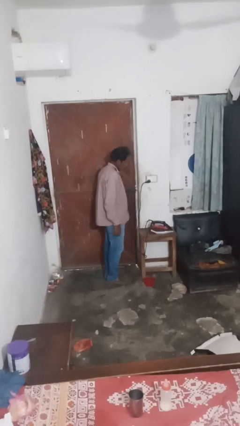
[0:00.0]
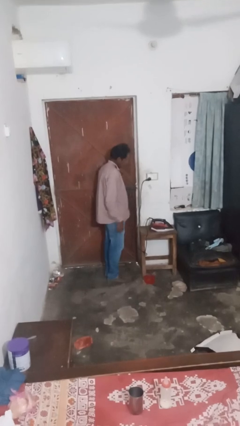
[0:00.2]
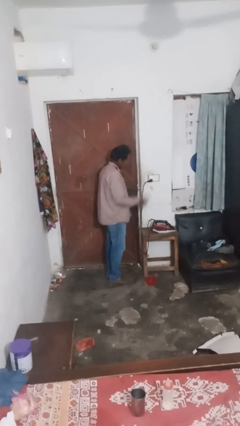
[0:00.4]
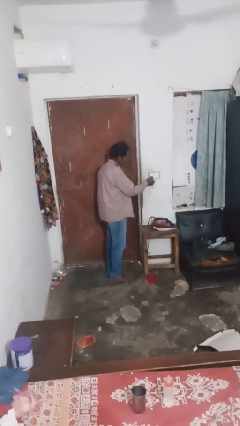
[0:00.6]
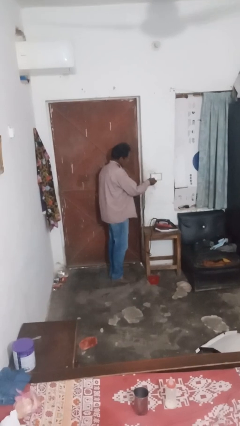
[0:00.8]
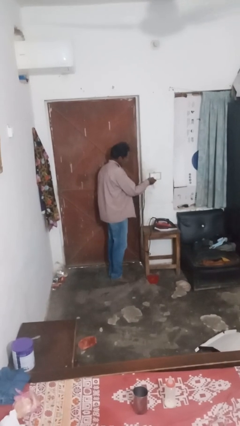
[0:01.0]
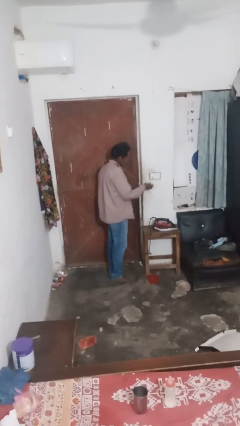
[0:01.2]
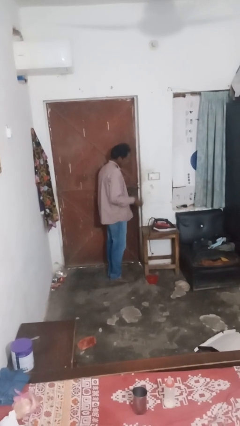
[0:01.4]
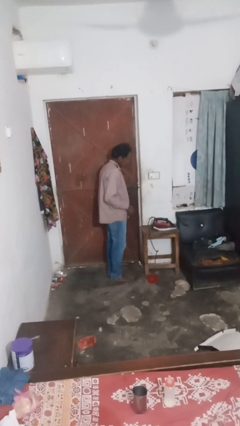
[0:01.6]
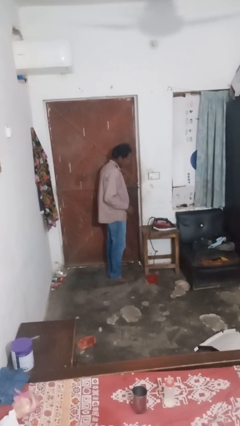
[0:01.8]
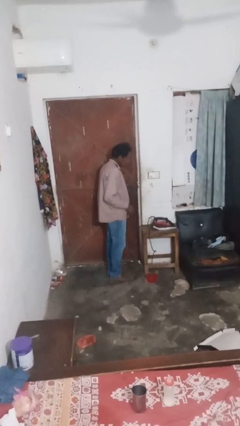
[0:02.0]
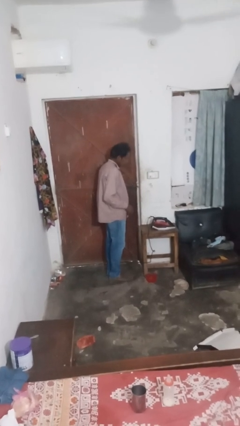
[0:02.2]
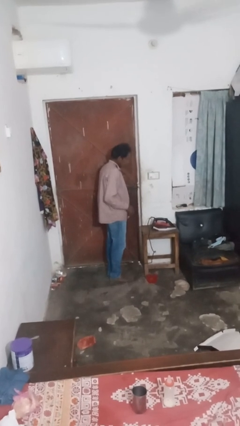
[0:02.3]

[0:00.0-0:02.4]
person unplugs from electrical socket

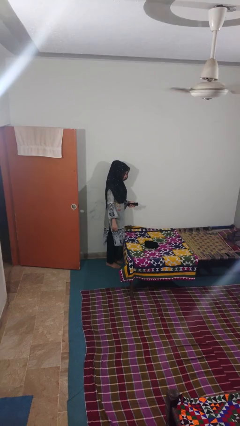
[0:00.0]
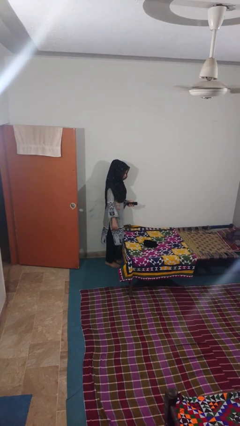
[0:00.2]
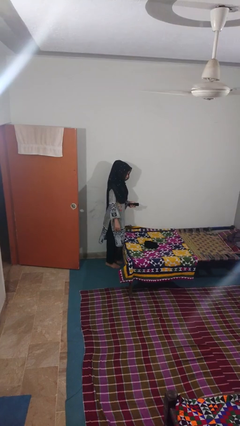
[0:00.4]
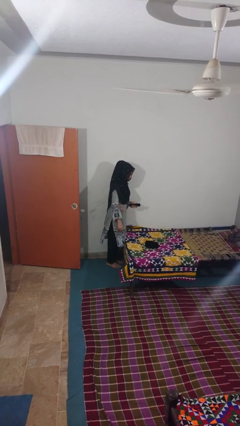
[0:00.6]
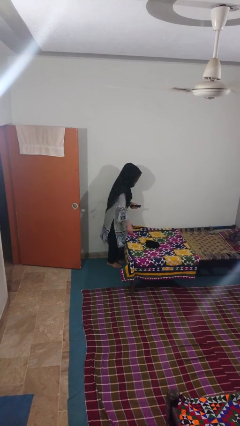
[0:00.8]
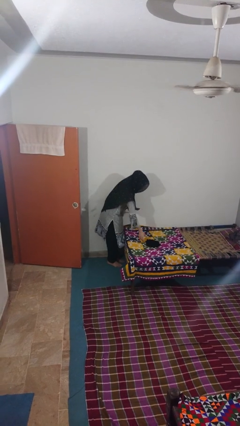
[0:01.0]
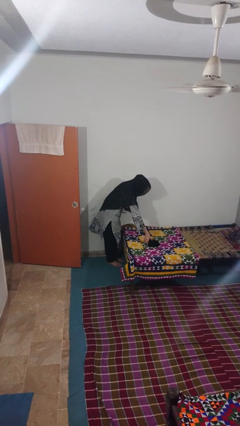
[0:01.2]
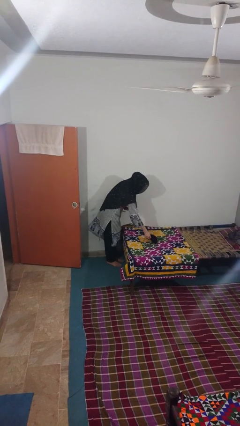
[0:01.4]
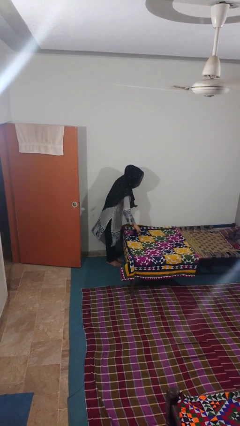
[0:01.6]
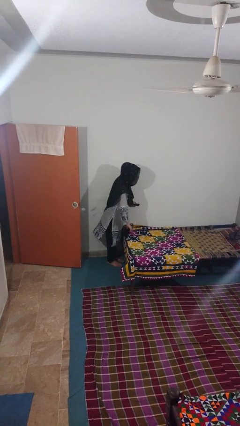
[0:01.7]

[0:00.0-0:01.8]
person picks up object from bed

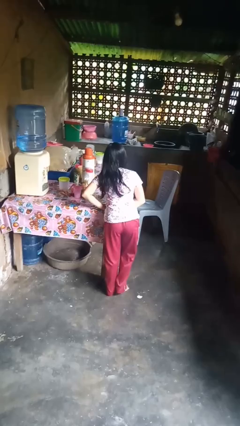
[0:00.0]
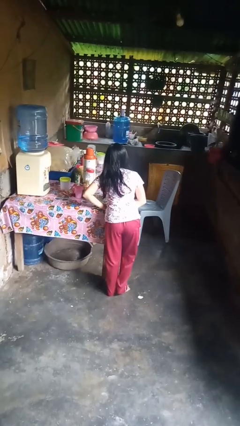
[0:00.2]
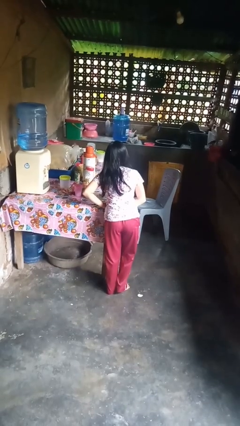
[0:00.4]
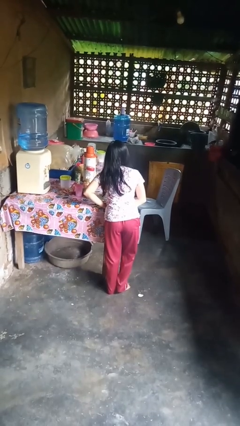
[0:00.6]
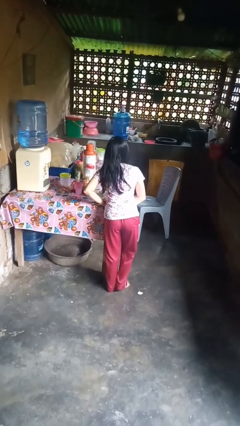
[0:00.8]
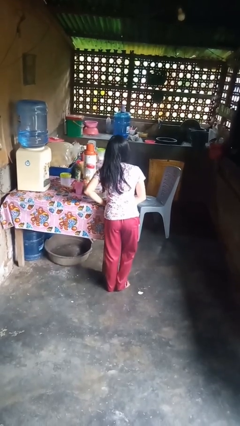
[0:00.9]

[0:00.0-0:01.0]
person bumps into table

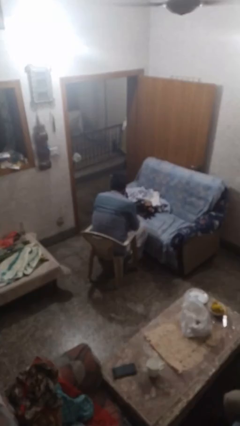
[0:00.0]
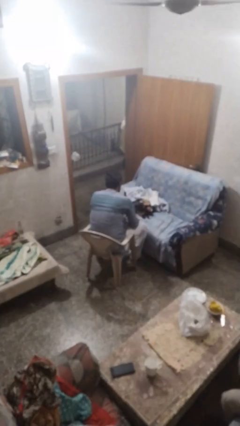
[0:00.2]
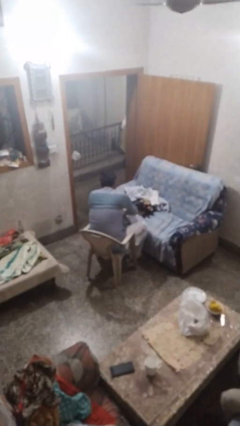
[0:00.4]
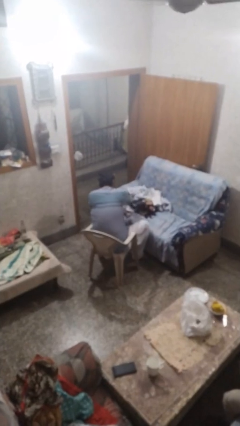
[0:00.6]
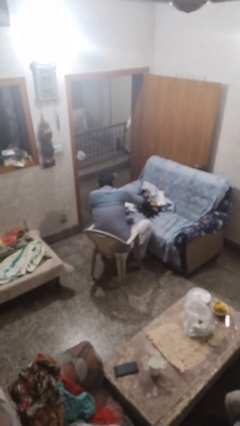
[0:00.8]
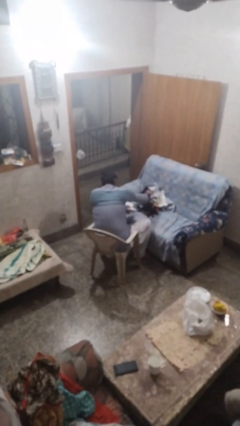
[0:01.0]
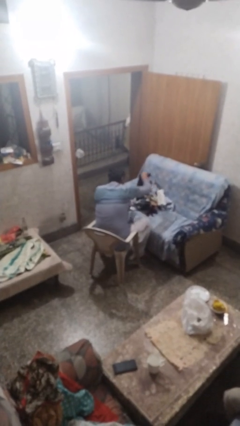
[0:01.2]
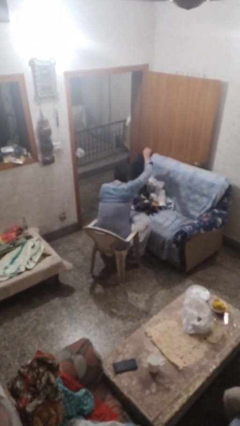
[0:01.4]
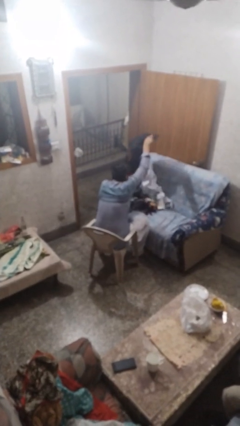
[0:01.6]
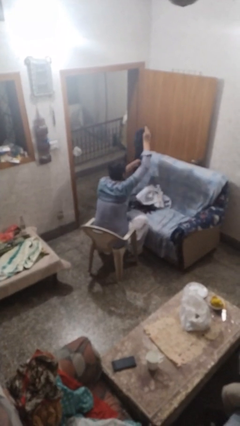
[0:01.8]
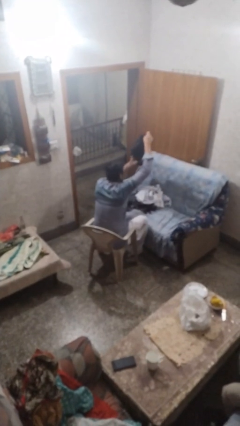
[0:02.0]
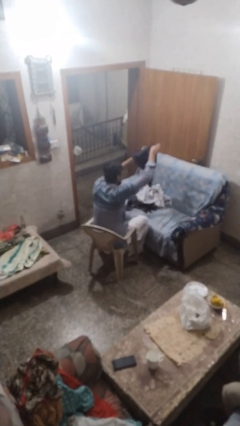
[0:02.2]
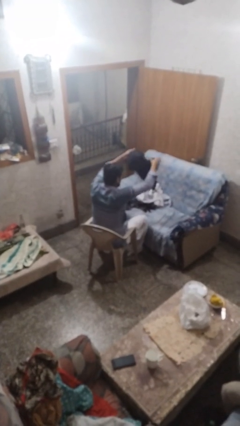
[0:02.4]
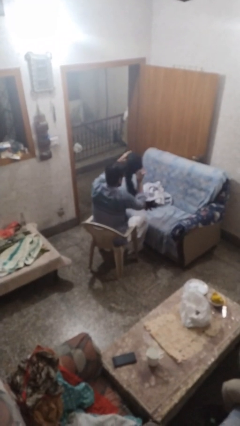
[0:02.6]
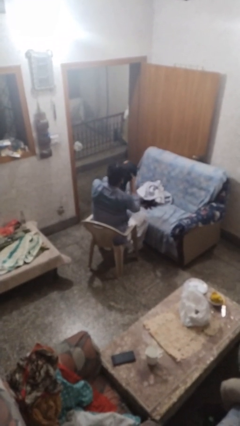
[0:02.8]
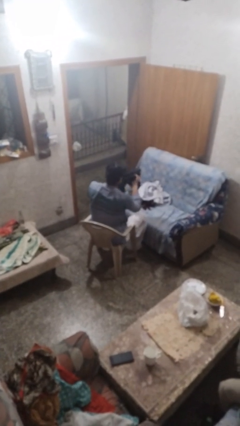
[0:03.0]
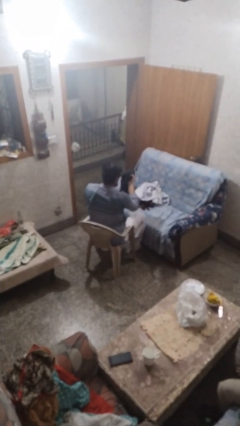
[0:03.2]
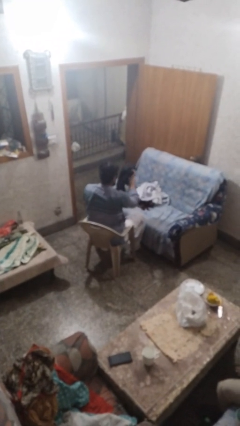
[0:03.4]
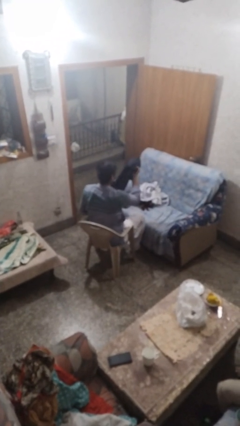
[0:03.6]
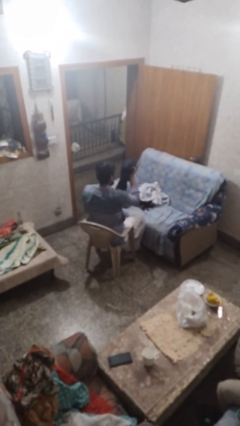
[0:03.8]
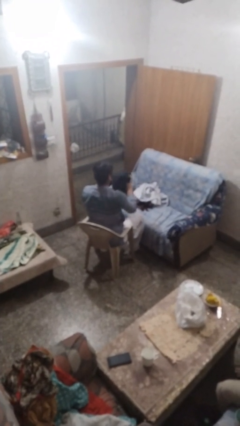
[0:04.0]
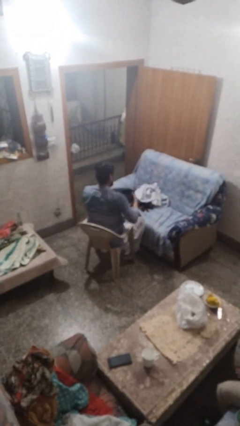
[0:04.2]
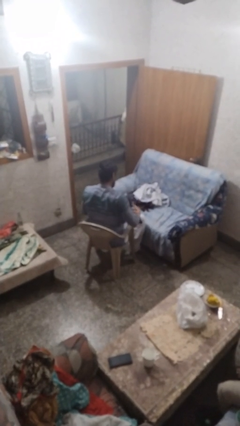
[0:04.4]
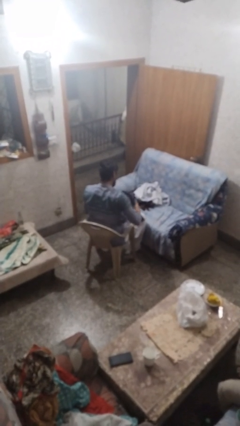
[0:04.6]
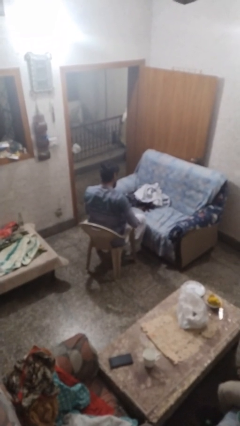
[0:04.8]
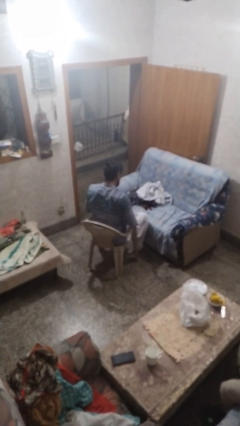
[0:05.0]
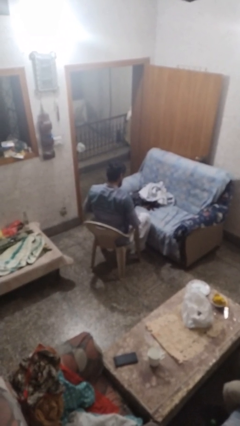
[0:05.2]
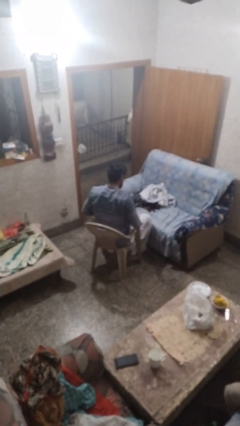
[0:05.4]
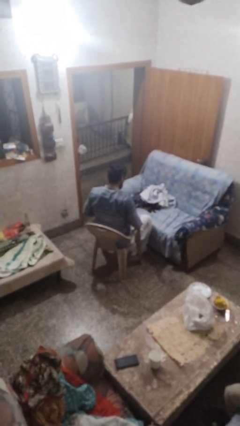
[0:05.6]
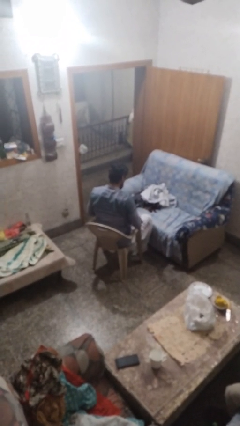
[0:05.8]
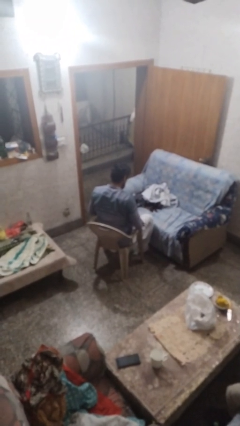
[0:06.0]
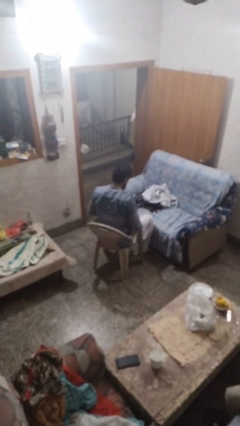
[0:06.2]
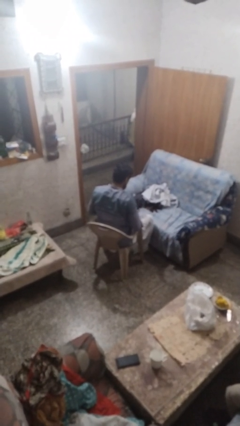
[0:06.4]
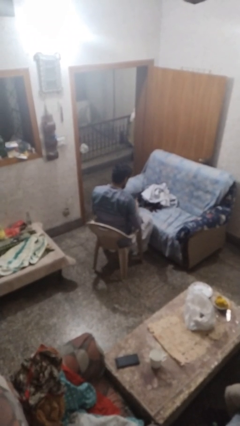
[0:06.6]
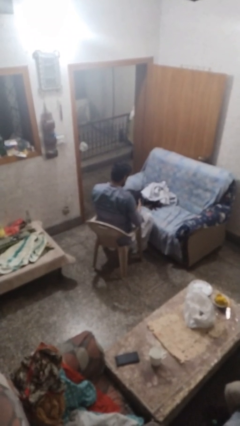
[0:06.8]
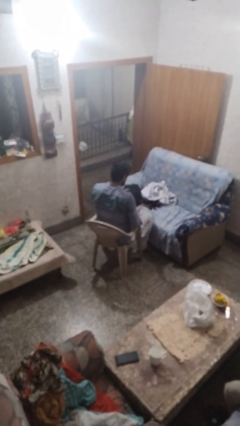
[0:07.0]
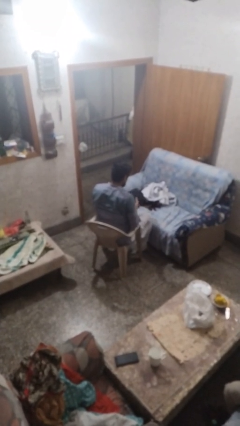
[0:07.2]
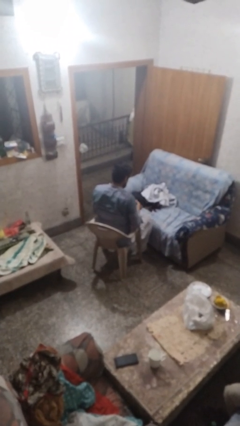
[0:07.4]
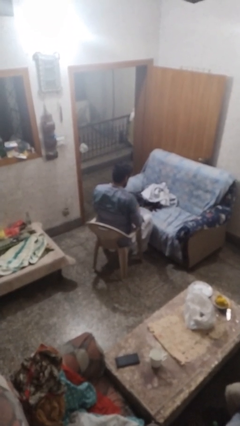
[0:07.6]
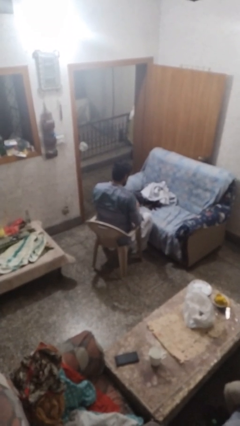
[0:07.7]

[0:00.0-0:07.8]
person folds pants

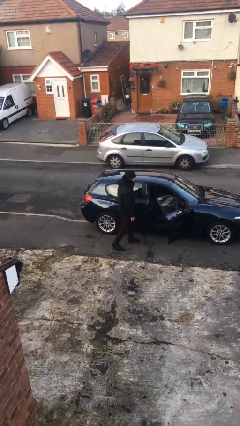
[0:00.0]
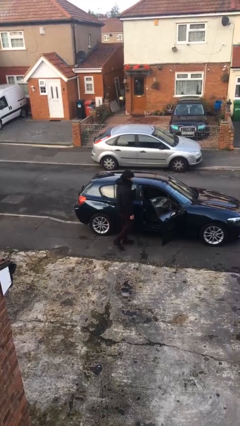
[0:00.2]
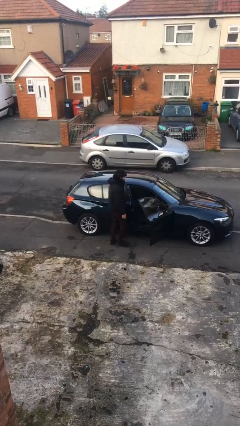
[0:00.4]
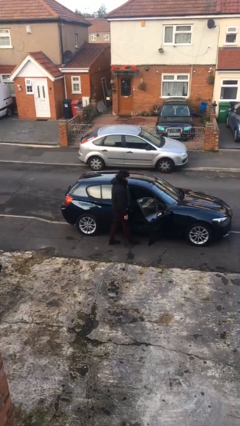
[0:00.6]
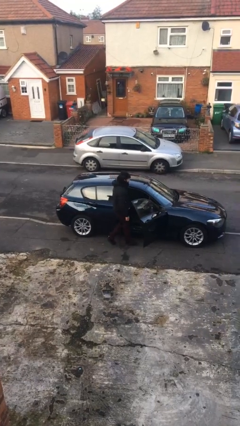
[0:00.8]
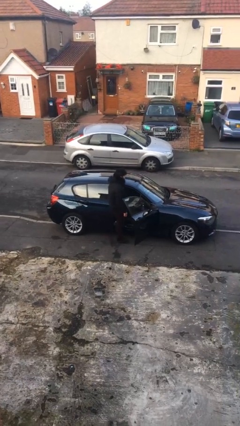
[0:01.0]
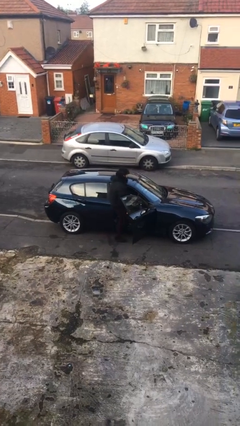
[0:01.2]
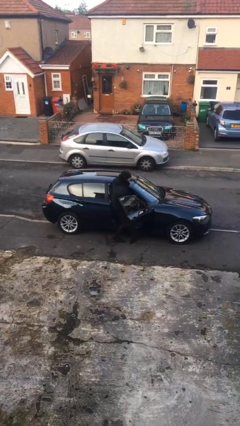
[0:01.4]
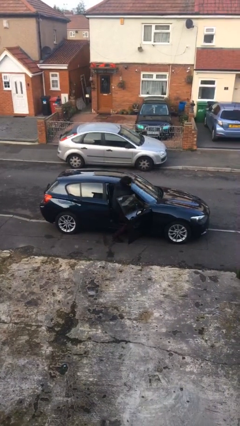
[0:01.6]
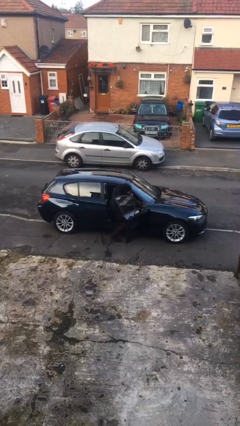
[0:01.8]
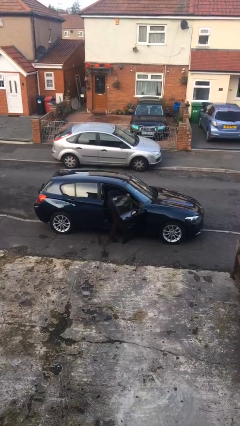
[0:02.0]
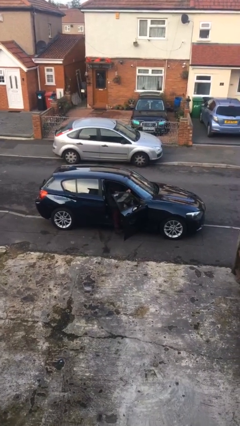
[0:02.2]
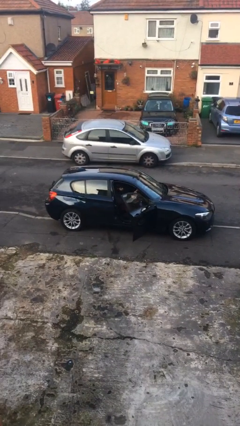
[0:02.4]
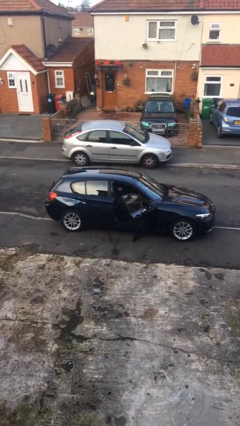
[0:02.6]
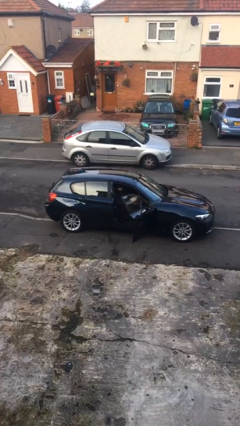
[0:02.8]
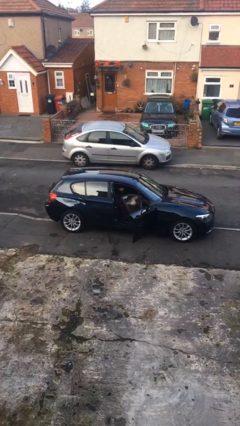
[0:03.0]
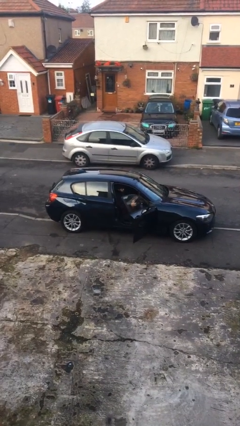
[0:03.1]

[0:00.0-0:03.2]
person enters car

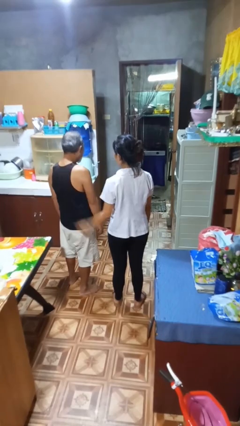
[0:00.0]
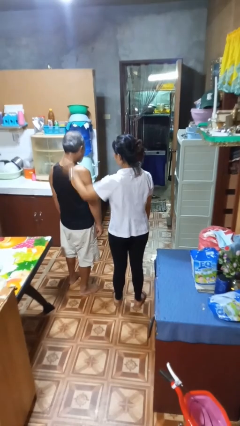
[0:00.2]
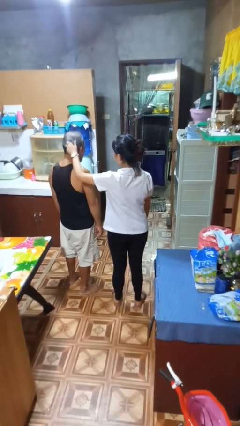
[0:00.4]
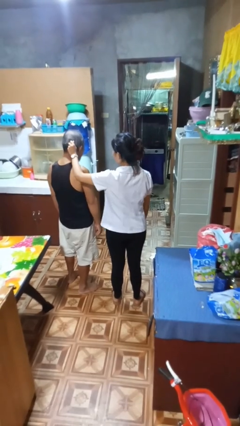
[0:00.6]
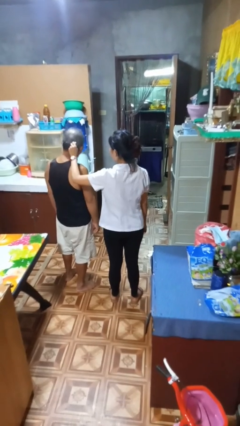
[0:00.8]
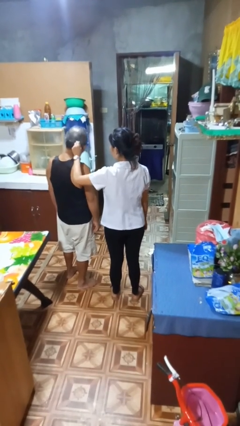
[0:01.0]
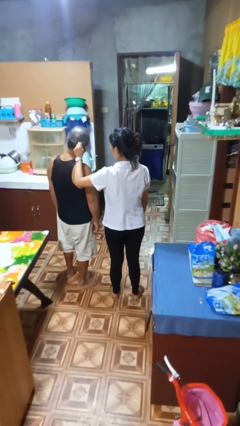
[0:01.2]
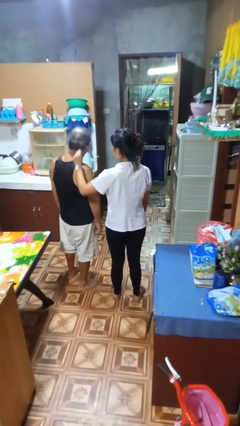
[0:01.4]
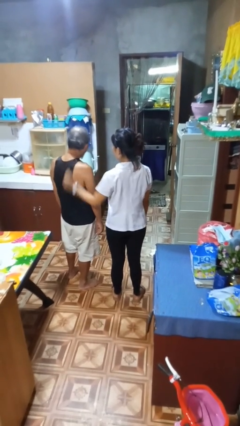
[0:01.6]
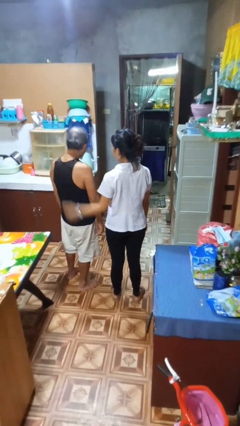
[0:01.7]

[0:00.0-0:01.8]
person grabs person by hair
